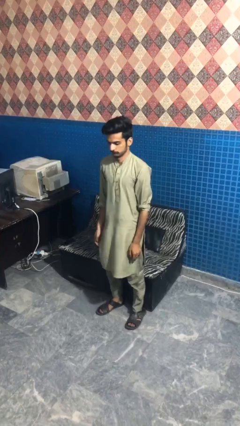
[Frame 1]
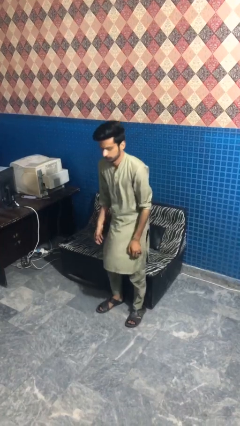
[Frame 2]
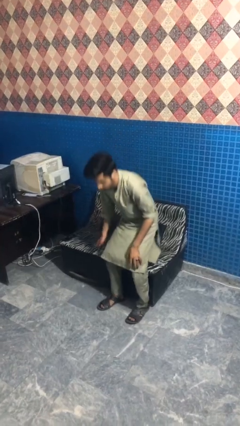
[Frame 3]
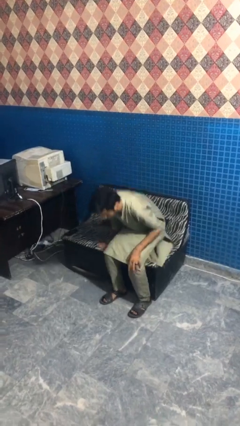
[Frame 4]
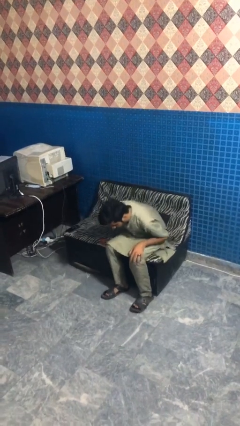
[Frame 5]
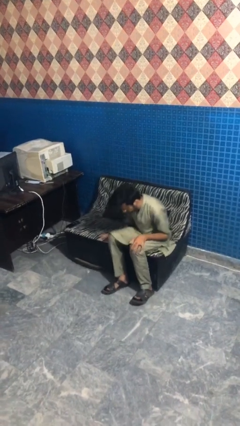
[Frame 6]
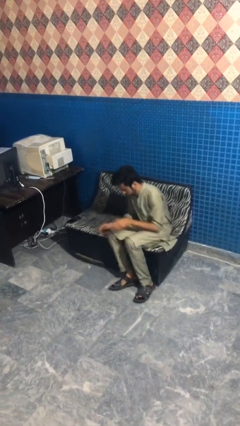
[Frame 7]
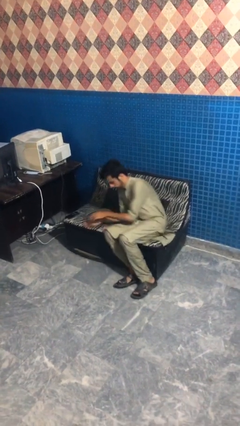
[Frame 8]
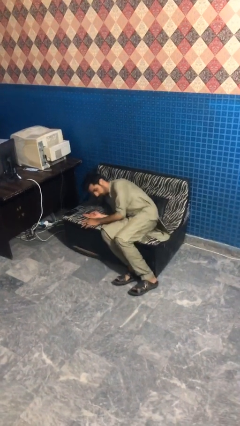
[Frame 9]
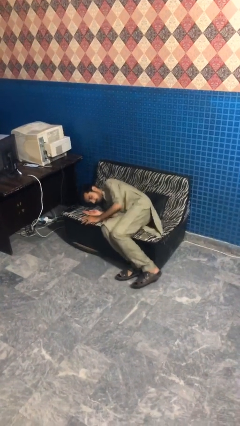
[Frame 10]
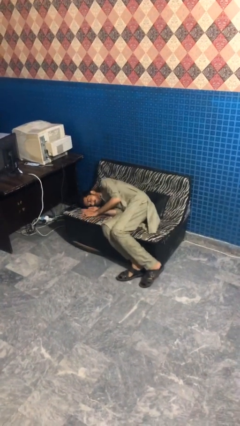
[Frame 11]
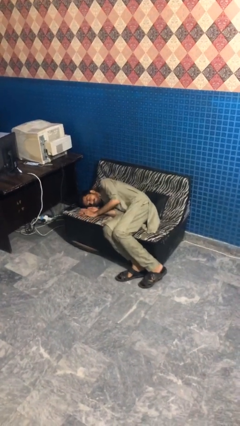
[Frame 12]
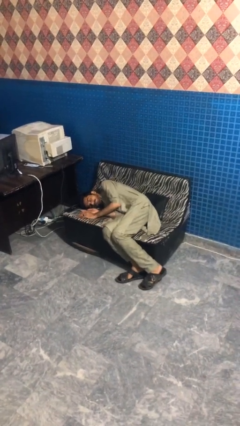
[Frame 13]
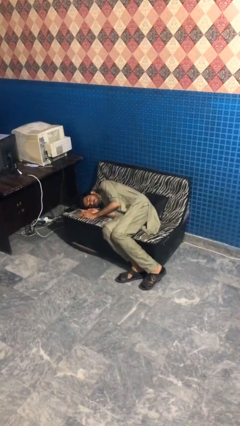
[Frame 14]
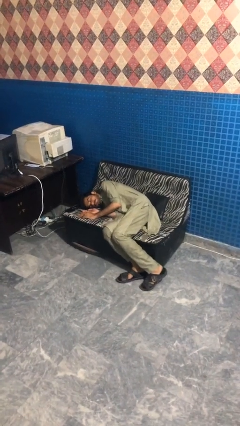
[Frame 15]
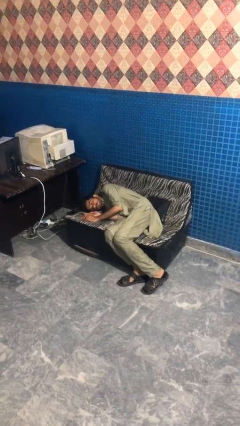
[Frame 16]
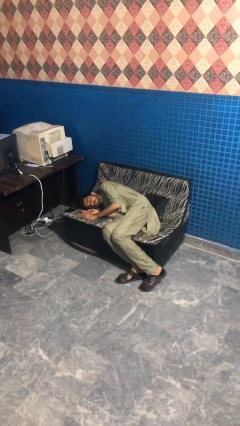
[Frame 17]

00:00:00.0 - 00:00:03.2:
person lies down on couch

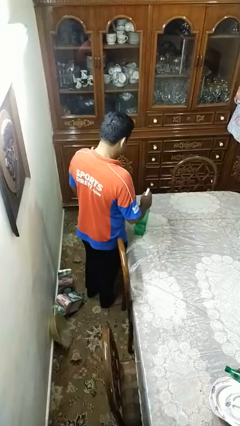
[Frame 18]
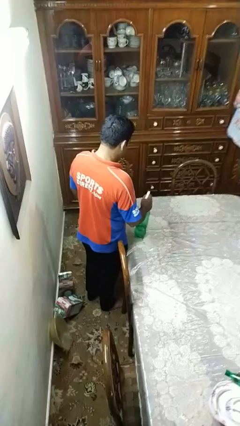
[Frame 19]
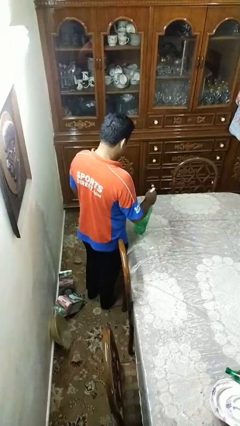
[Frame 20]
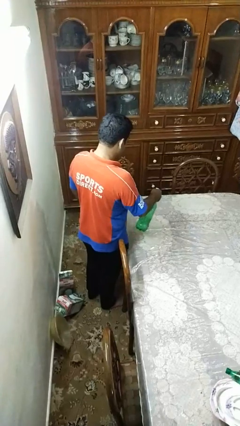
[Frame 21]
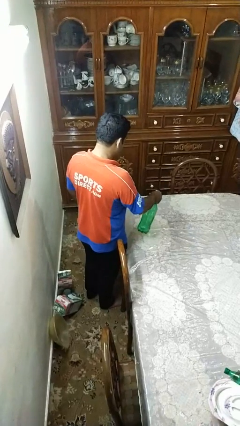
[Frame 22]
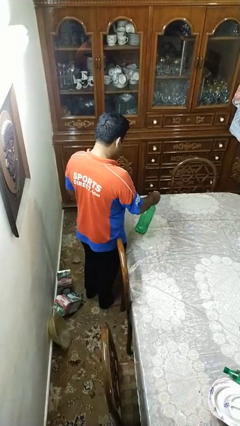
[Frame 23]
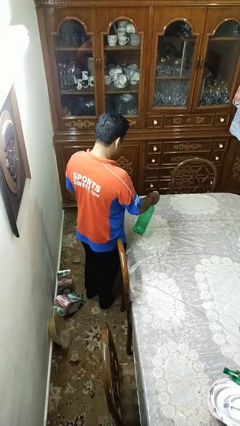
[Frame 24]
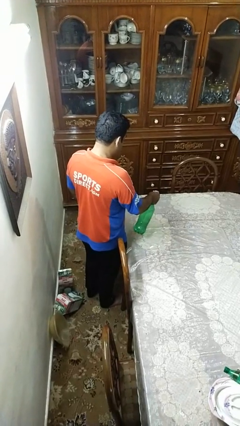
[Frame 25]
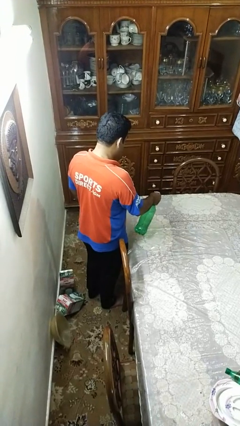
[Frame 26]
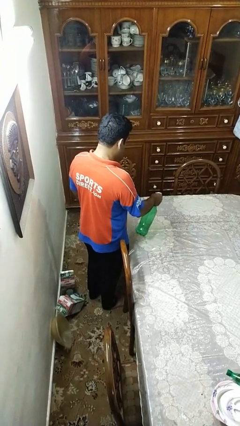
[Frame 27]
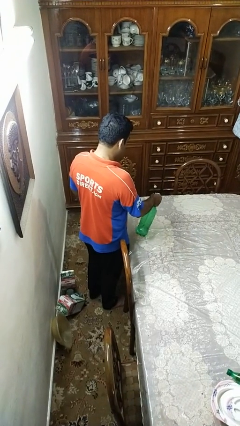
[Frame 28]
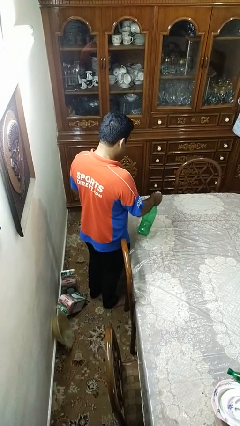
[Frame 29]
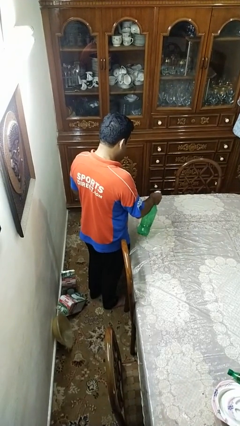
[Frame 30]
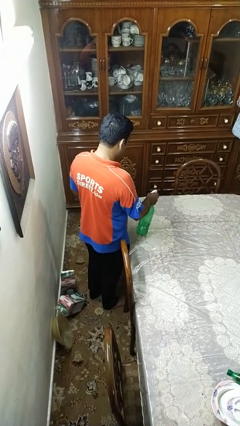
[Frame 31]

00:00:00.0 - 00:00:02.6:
person sprays from bottle

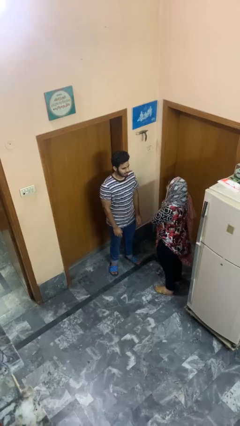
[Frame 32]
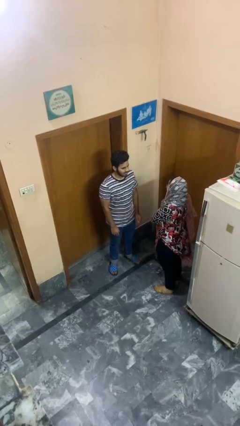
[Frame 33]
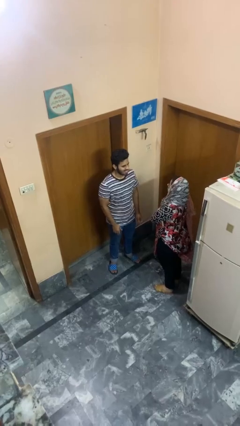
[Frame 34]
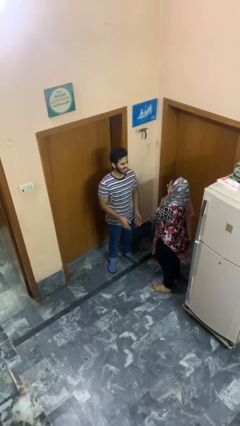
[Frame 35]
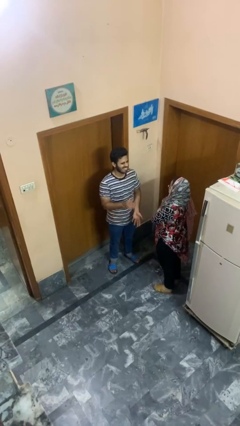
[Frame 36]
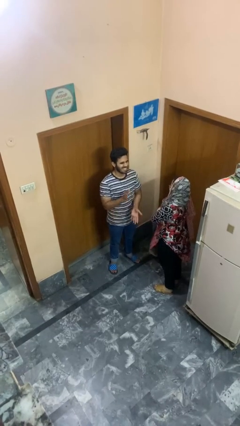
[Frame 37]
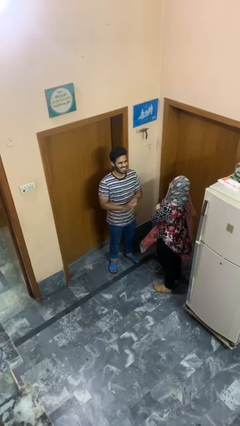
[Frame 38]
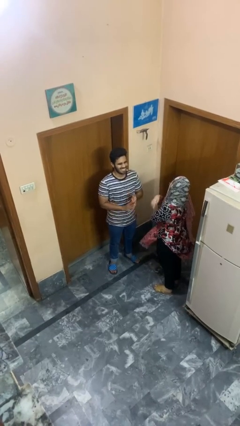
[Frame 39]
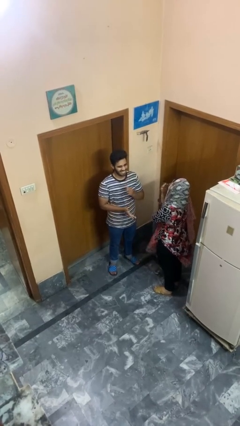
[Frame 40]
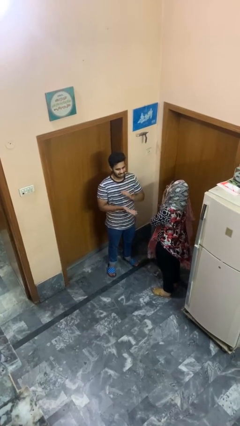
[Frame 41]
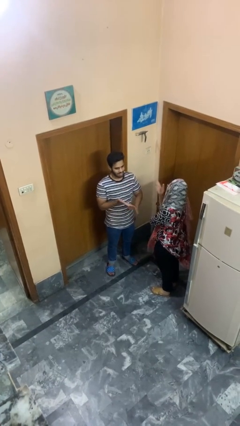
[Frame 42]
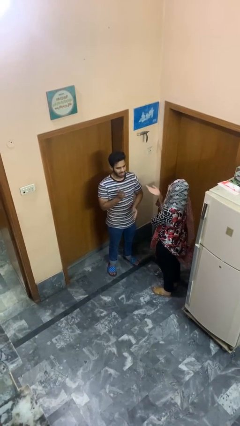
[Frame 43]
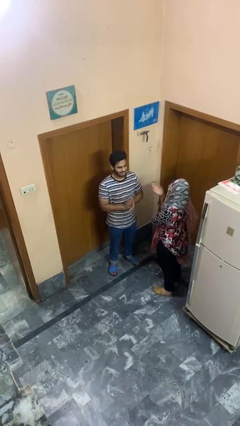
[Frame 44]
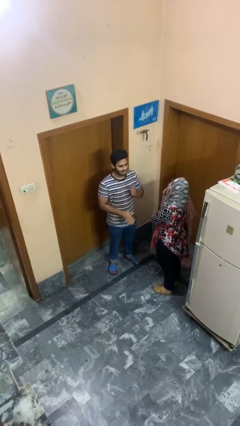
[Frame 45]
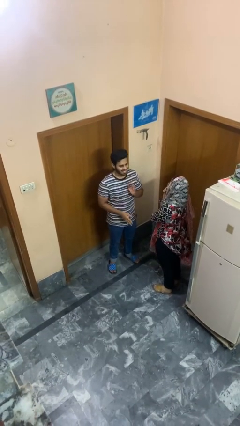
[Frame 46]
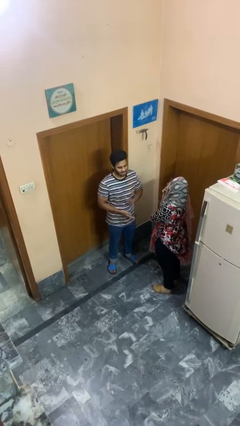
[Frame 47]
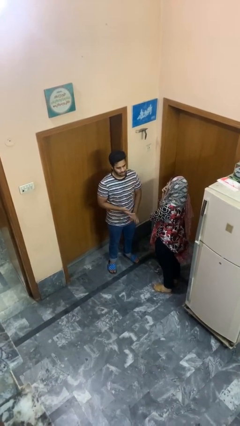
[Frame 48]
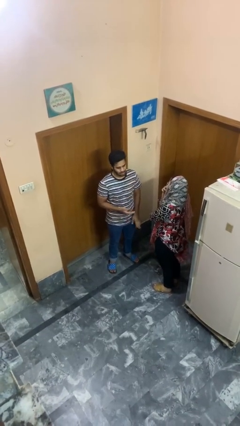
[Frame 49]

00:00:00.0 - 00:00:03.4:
person laughs with person

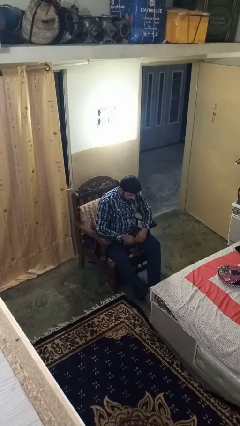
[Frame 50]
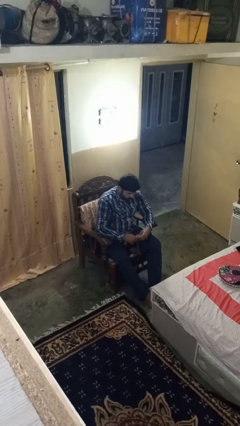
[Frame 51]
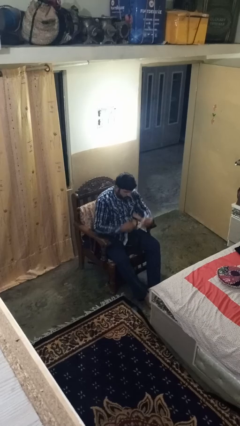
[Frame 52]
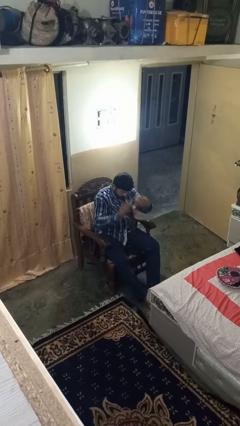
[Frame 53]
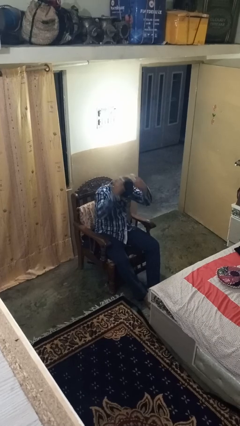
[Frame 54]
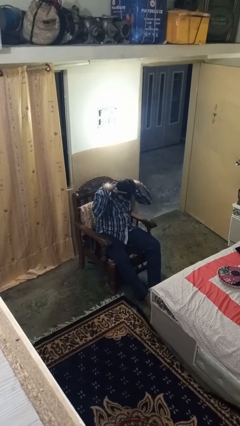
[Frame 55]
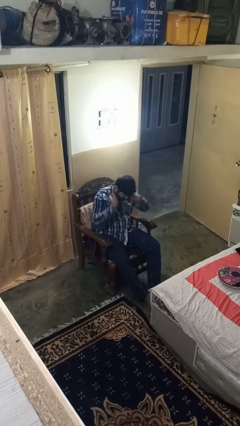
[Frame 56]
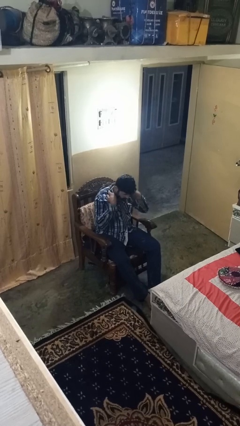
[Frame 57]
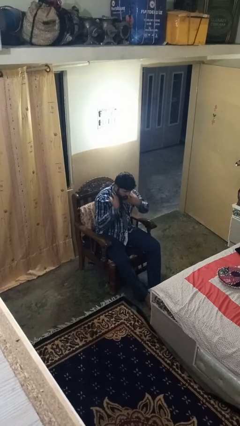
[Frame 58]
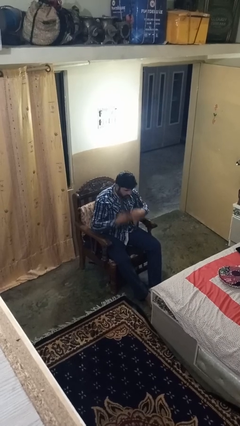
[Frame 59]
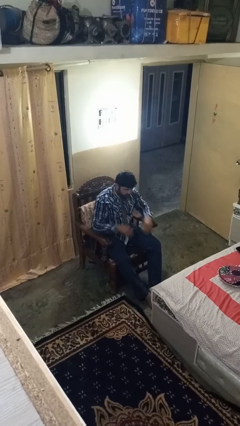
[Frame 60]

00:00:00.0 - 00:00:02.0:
person puts on necktie

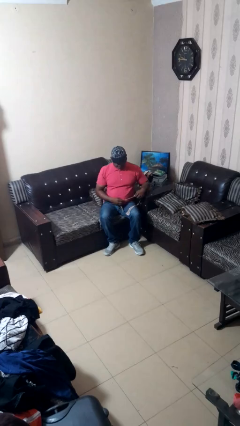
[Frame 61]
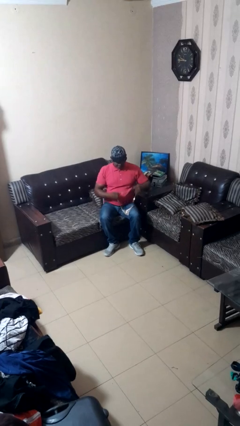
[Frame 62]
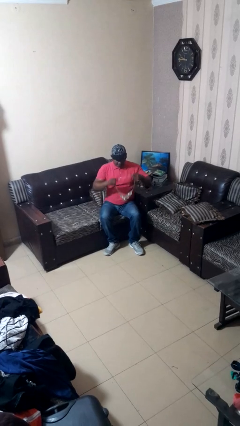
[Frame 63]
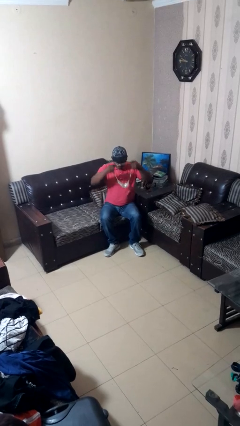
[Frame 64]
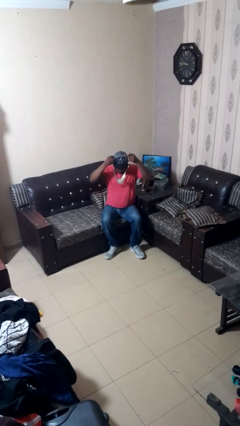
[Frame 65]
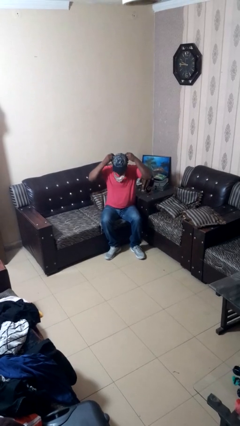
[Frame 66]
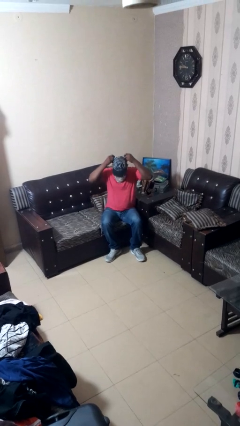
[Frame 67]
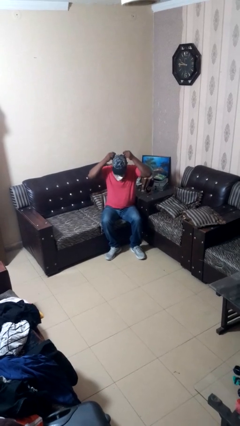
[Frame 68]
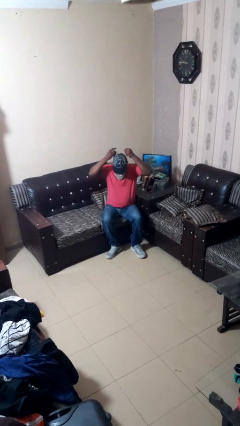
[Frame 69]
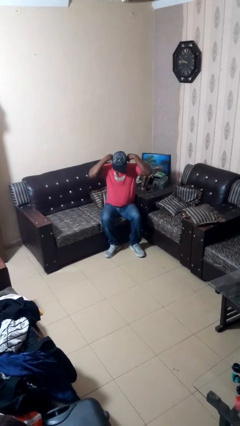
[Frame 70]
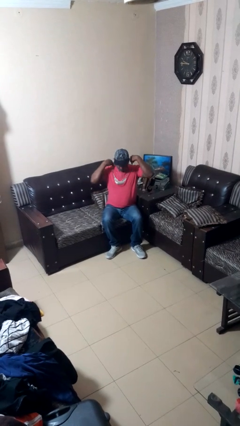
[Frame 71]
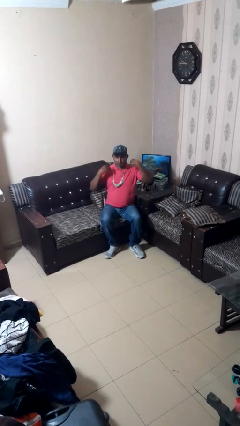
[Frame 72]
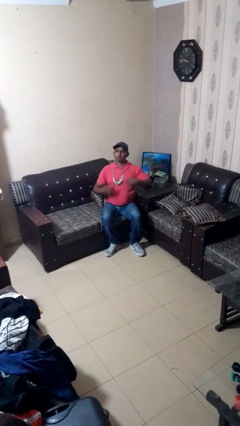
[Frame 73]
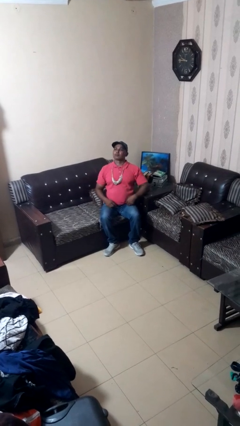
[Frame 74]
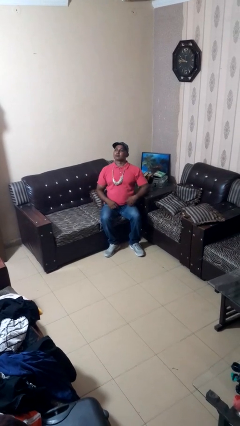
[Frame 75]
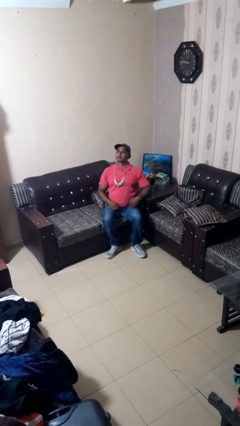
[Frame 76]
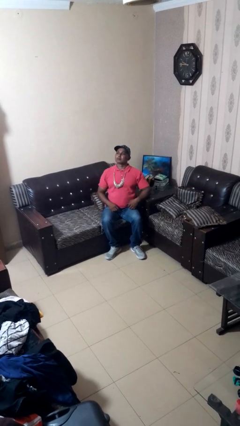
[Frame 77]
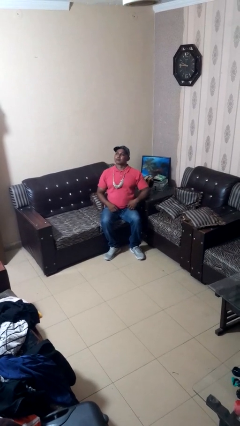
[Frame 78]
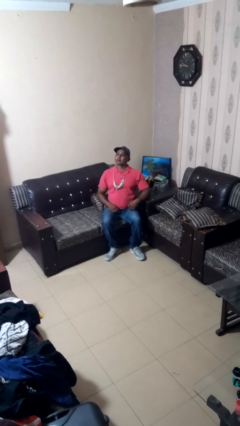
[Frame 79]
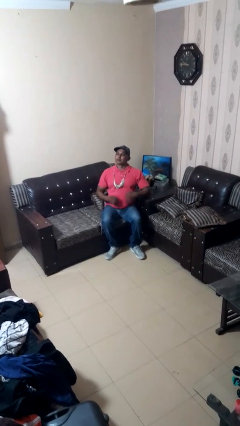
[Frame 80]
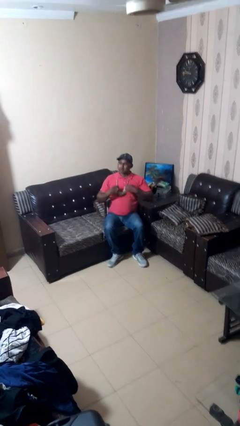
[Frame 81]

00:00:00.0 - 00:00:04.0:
person puts on necklace

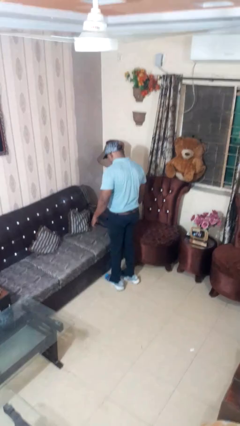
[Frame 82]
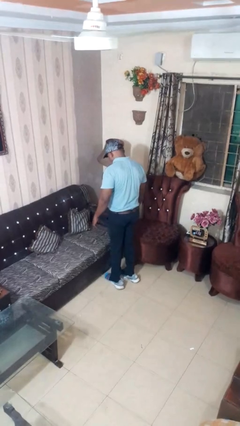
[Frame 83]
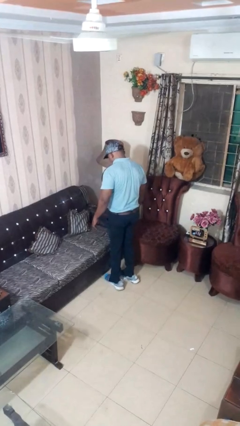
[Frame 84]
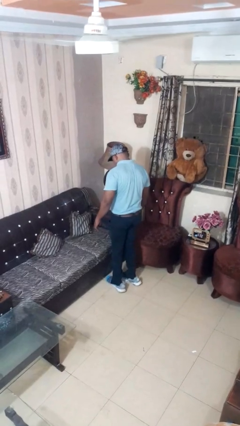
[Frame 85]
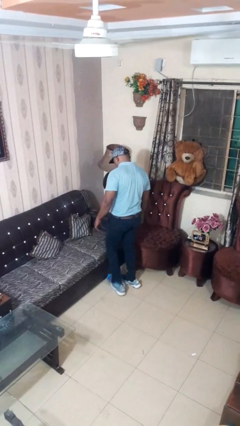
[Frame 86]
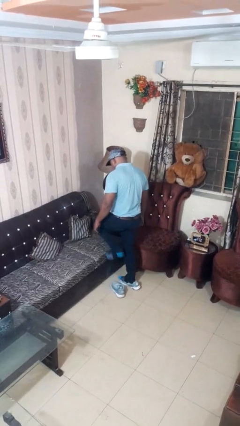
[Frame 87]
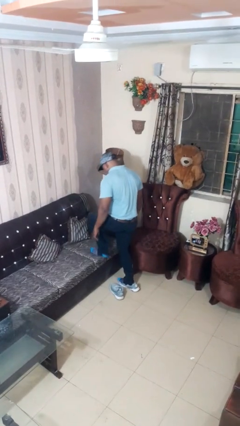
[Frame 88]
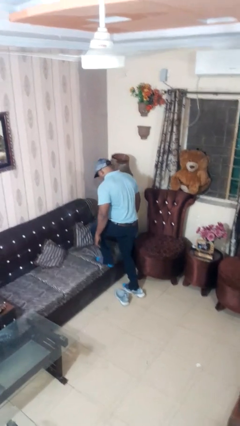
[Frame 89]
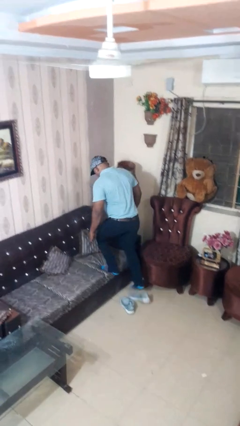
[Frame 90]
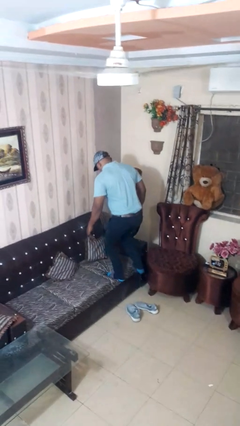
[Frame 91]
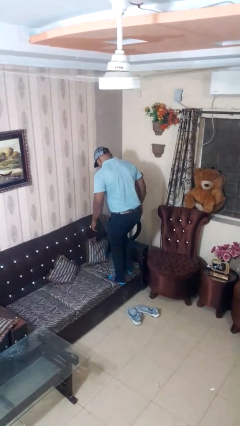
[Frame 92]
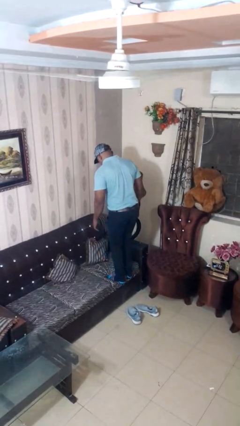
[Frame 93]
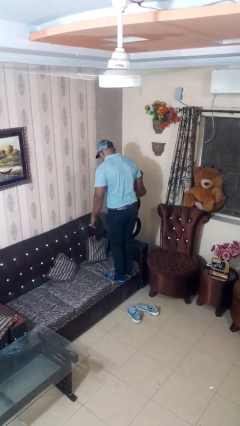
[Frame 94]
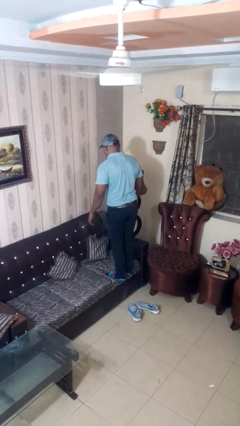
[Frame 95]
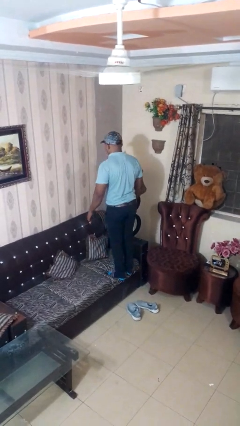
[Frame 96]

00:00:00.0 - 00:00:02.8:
person climbs on couch
